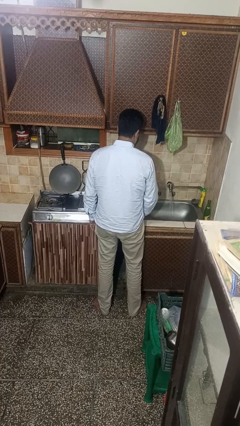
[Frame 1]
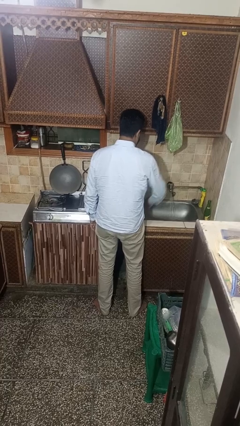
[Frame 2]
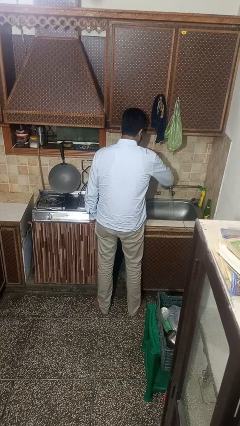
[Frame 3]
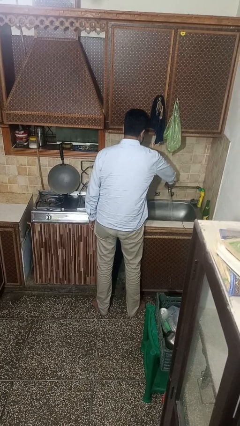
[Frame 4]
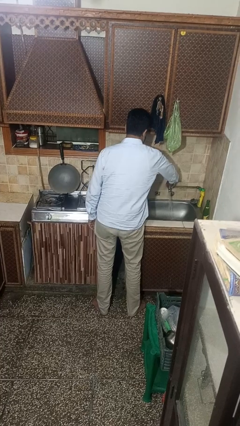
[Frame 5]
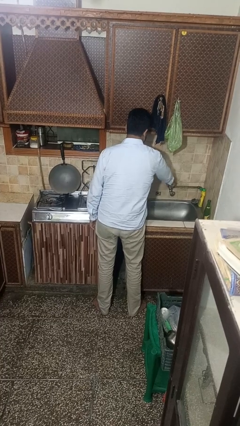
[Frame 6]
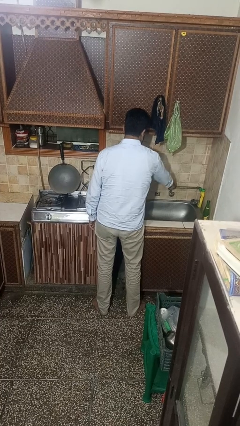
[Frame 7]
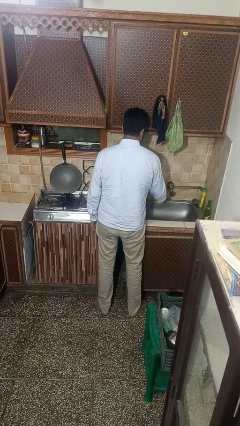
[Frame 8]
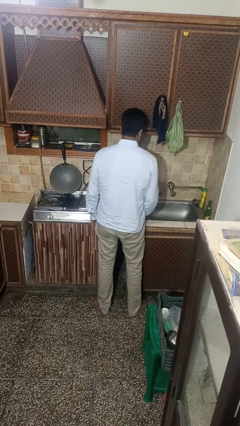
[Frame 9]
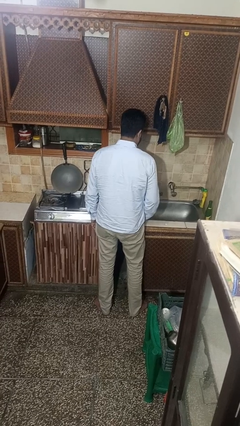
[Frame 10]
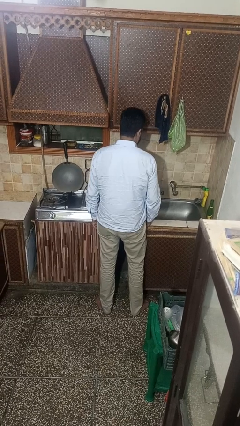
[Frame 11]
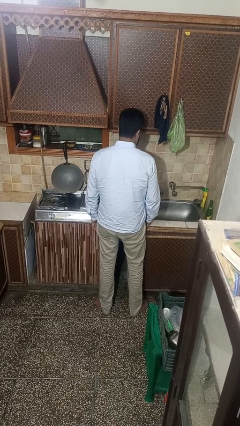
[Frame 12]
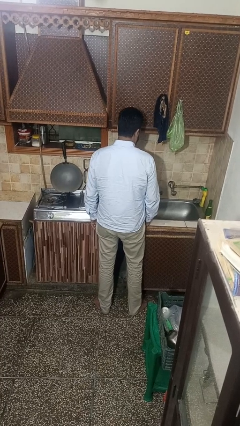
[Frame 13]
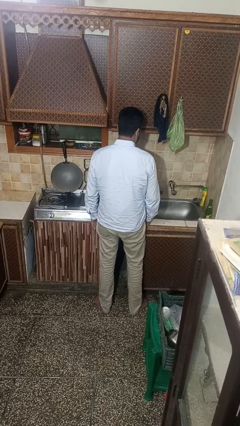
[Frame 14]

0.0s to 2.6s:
person turns off faucet

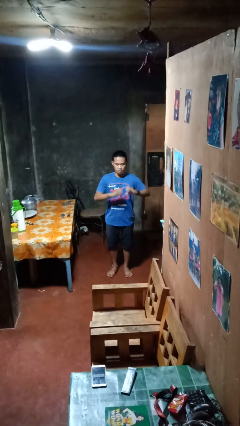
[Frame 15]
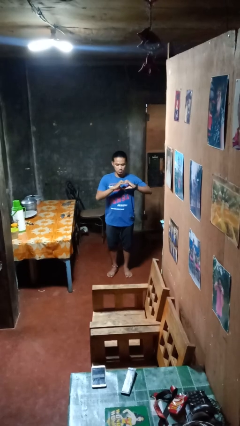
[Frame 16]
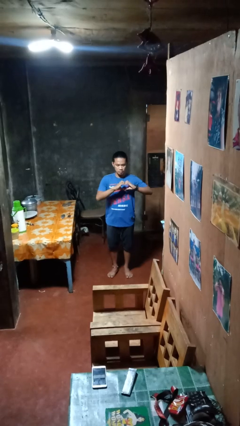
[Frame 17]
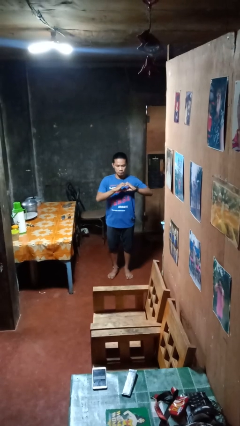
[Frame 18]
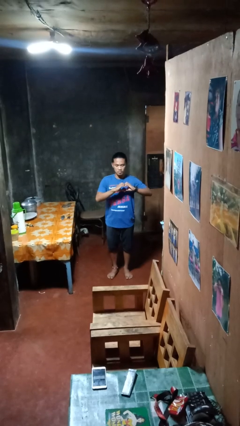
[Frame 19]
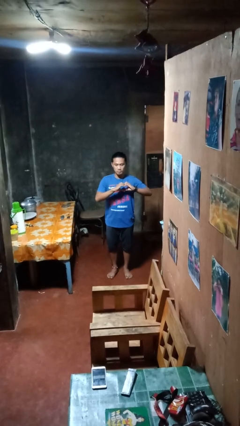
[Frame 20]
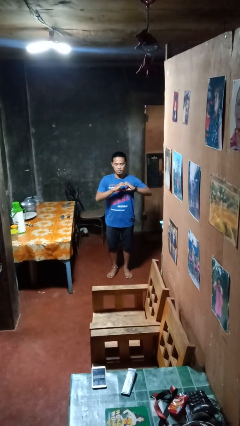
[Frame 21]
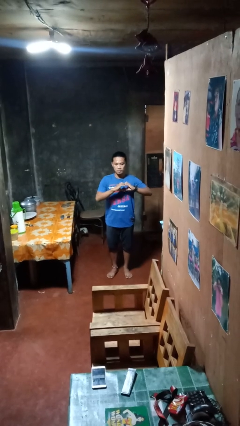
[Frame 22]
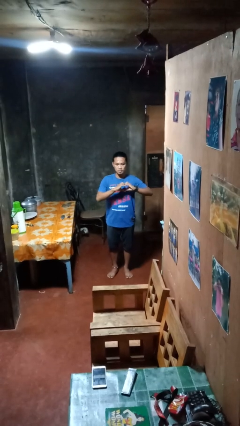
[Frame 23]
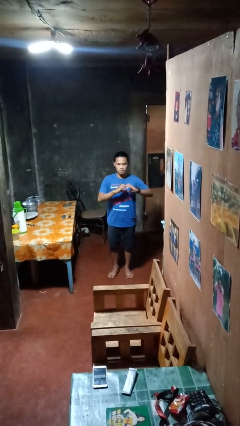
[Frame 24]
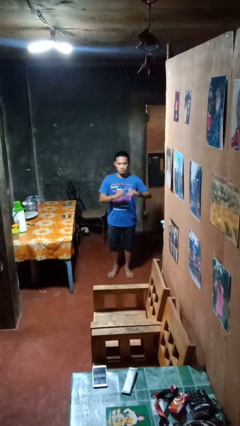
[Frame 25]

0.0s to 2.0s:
person gestures heart

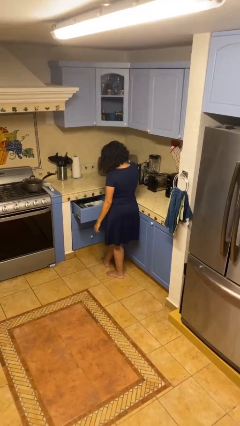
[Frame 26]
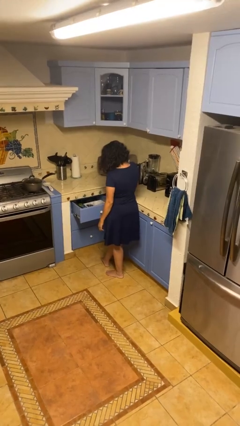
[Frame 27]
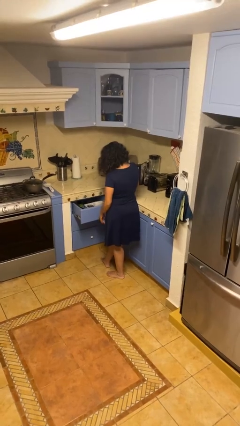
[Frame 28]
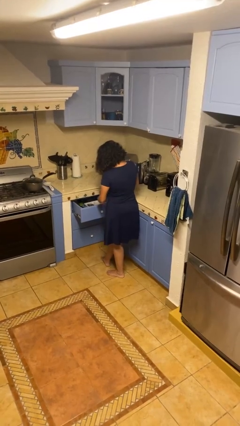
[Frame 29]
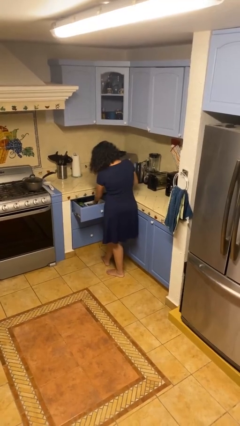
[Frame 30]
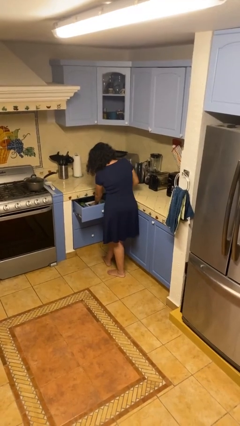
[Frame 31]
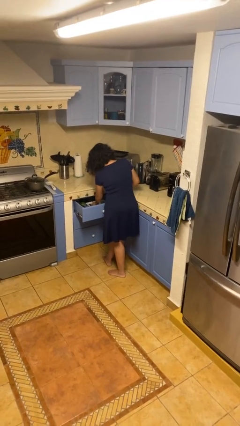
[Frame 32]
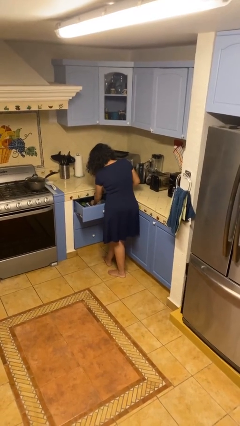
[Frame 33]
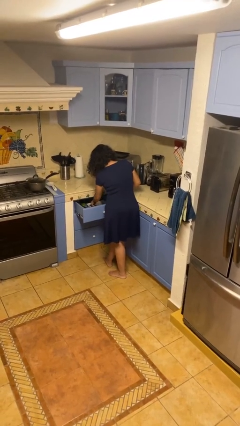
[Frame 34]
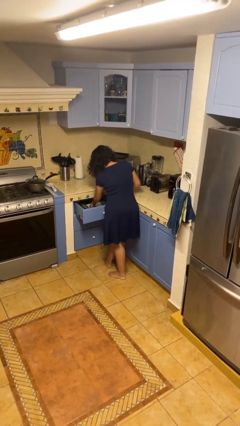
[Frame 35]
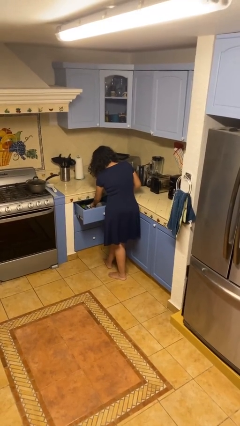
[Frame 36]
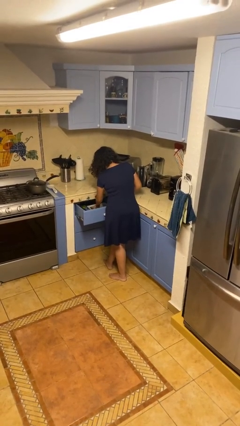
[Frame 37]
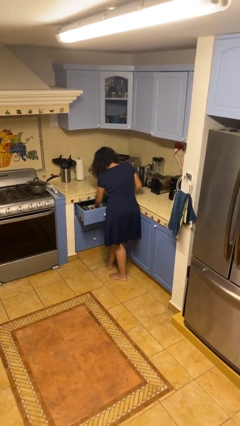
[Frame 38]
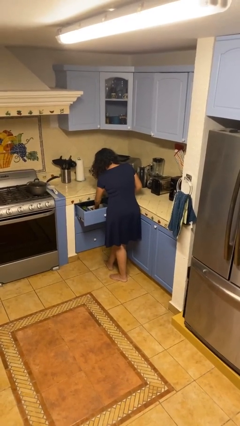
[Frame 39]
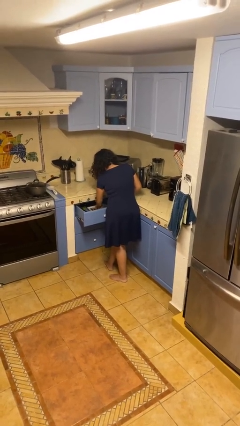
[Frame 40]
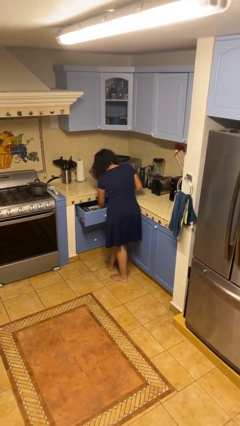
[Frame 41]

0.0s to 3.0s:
person searches in kitchen drawer

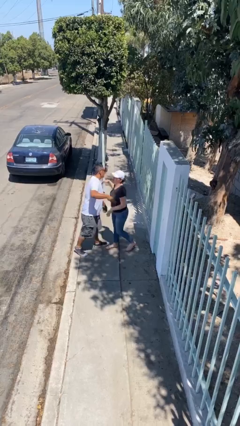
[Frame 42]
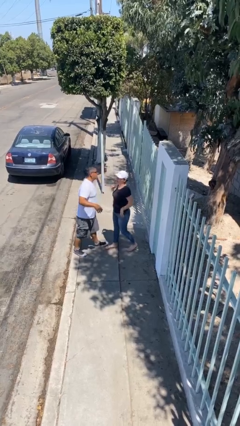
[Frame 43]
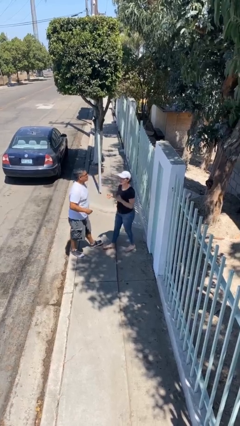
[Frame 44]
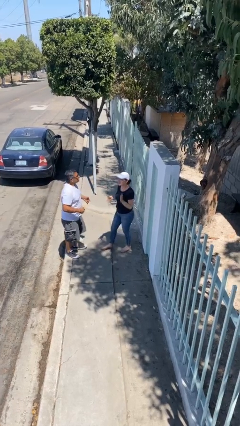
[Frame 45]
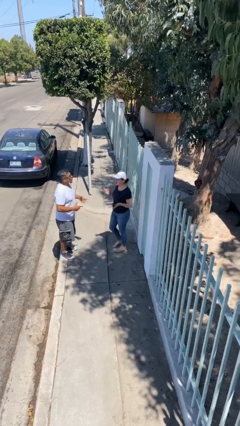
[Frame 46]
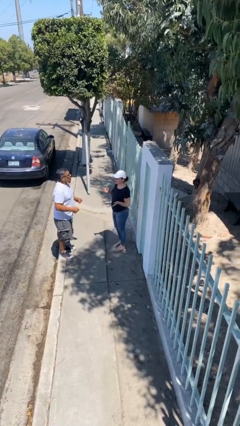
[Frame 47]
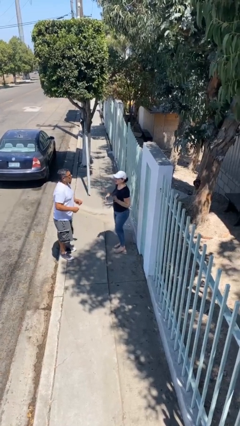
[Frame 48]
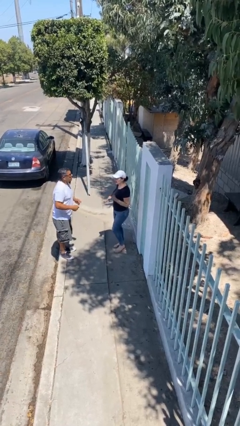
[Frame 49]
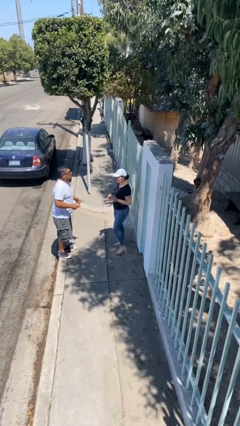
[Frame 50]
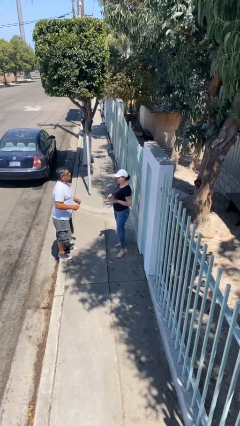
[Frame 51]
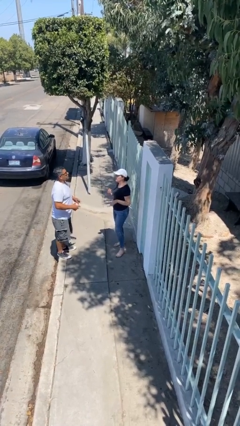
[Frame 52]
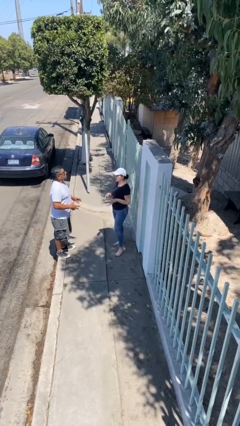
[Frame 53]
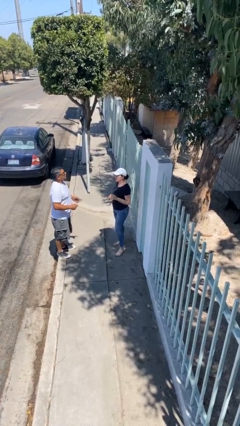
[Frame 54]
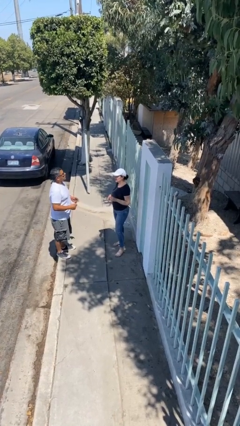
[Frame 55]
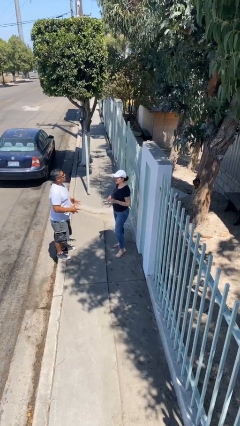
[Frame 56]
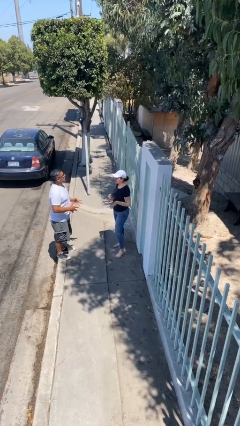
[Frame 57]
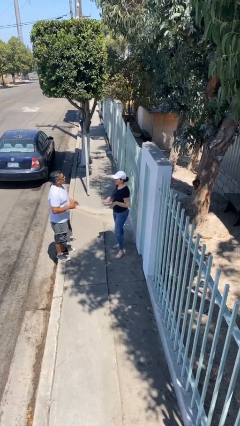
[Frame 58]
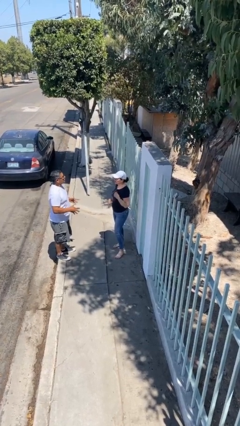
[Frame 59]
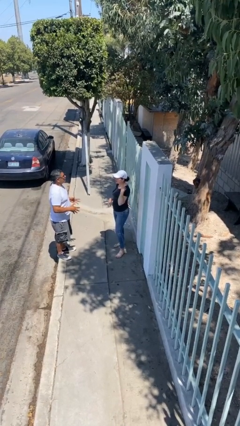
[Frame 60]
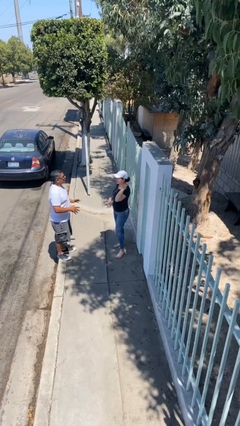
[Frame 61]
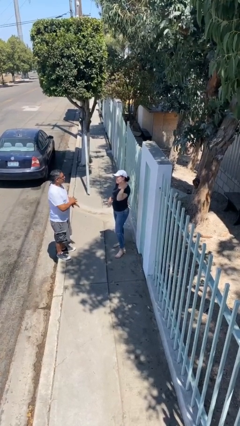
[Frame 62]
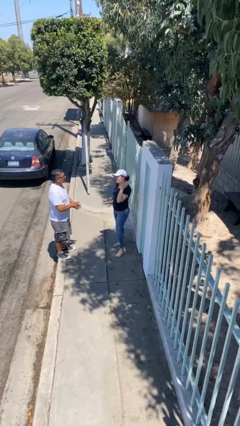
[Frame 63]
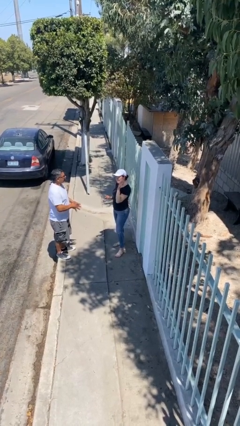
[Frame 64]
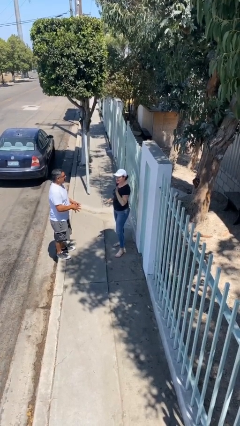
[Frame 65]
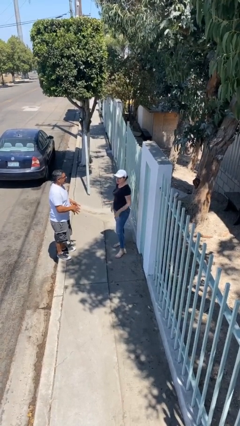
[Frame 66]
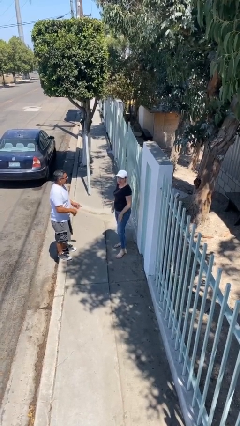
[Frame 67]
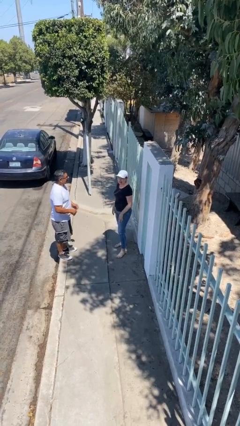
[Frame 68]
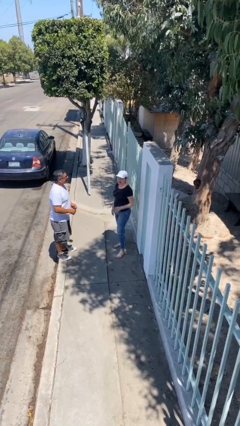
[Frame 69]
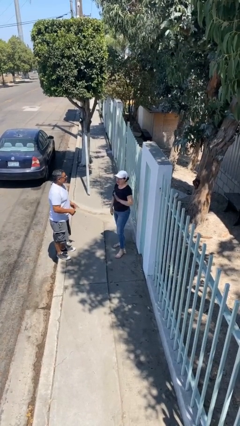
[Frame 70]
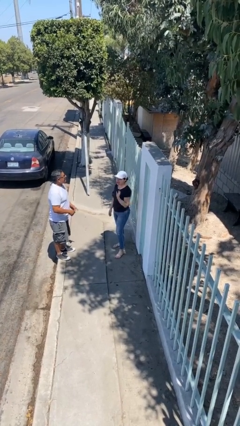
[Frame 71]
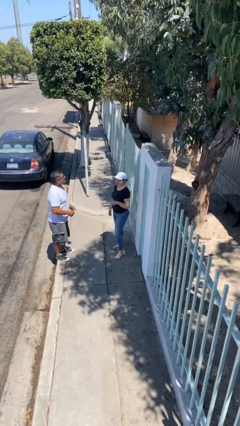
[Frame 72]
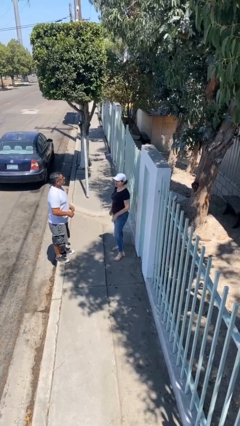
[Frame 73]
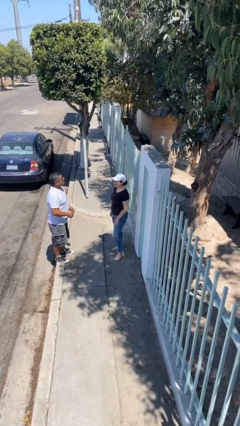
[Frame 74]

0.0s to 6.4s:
person talks to person

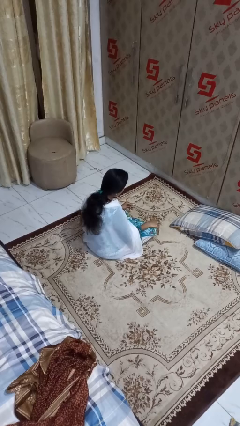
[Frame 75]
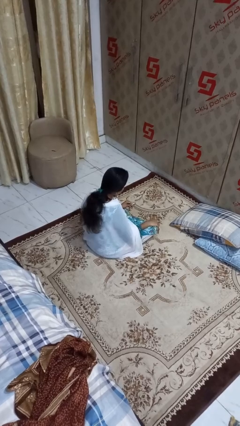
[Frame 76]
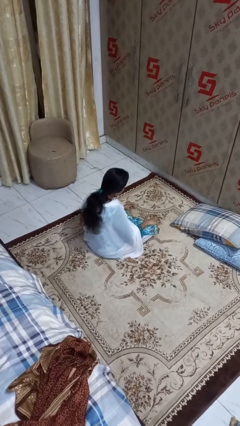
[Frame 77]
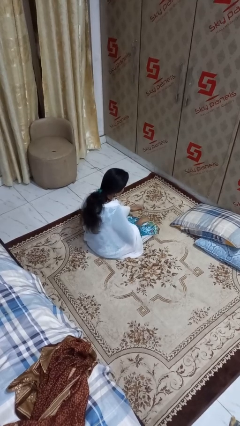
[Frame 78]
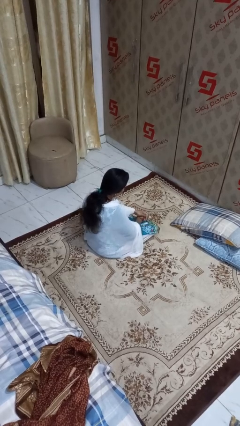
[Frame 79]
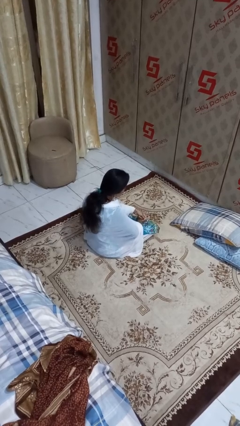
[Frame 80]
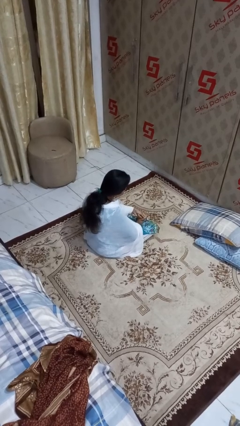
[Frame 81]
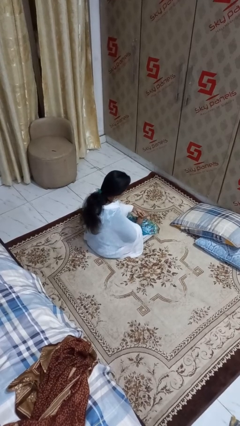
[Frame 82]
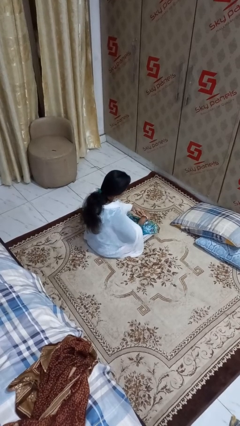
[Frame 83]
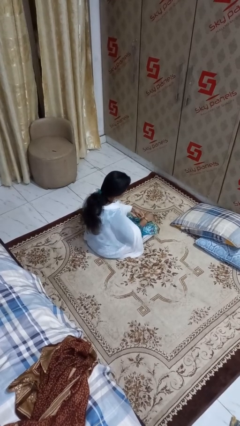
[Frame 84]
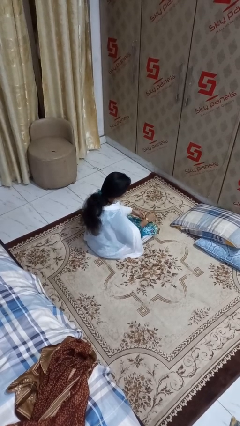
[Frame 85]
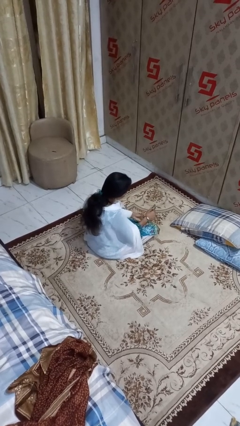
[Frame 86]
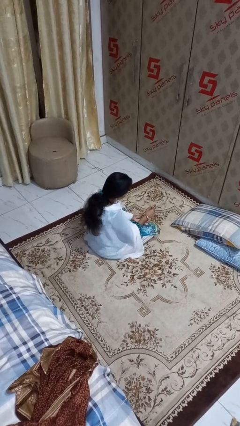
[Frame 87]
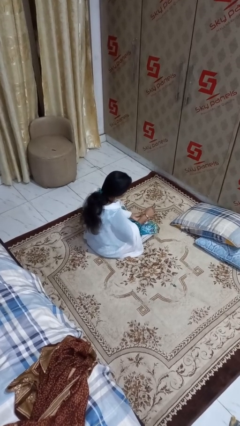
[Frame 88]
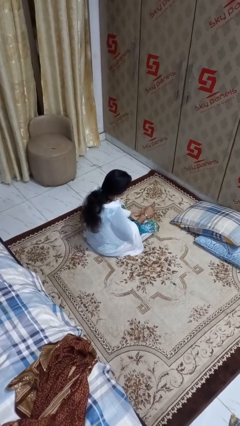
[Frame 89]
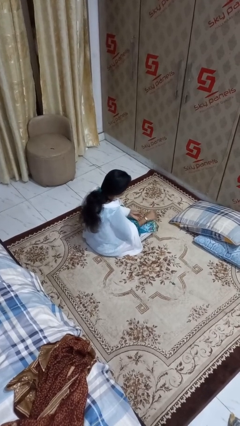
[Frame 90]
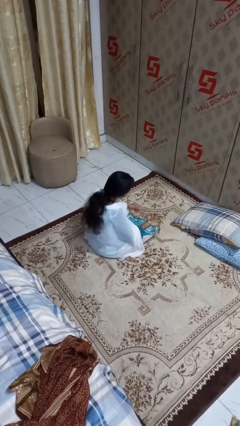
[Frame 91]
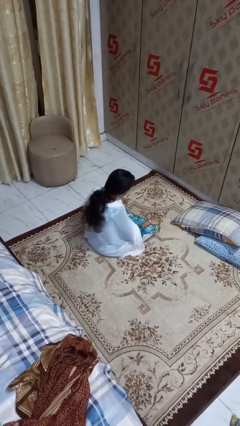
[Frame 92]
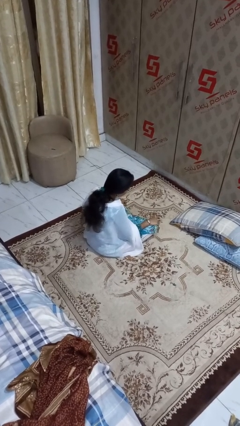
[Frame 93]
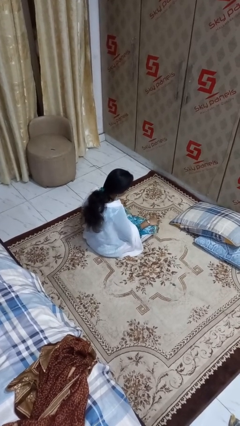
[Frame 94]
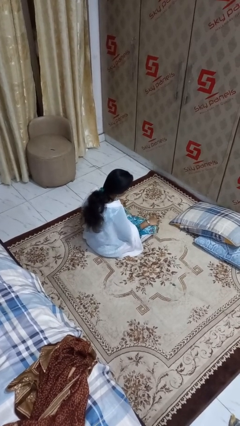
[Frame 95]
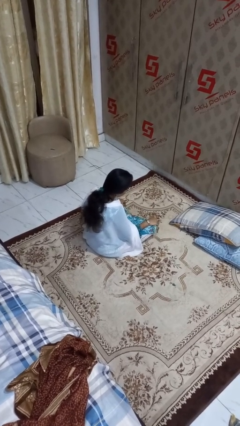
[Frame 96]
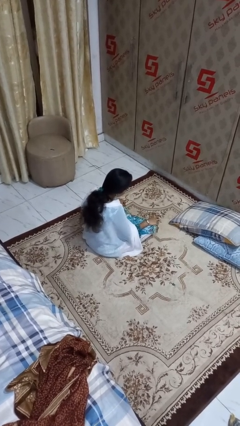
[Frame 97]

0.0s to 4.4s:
person puts on wristwatch
